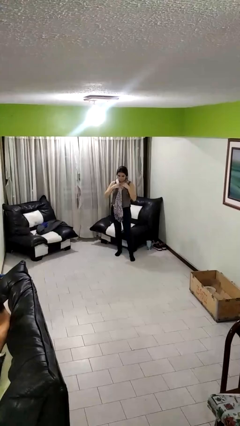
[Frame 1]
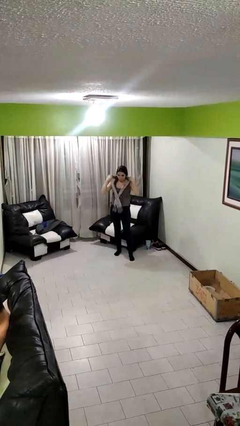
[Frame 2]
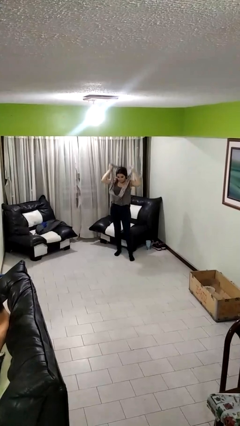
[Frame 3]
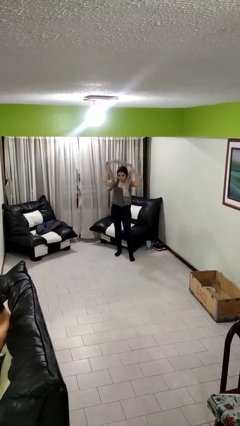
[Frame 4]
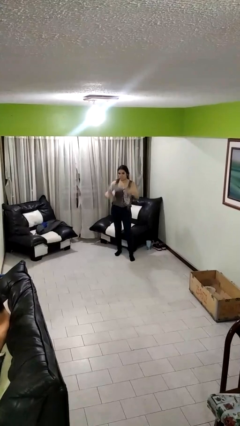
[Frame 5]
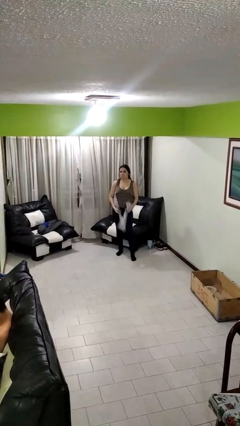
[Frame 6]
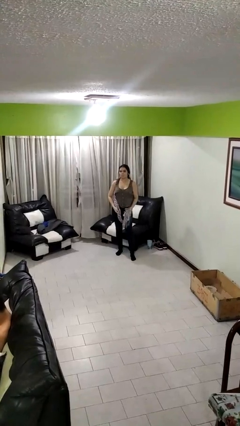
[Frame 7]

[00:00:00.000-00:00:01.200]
person takes off scarf

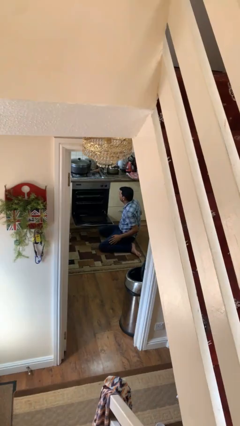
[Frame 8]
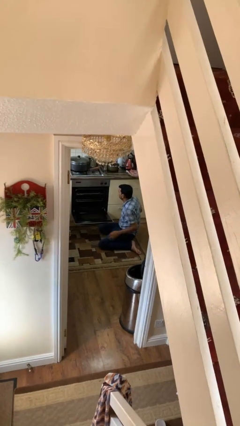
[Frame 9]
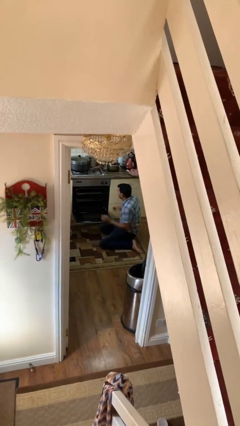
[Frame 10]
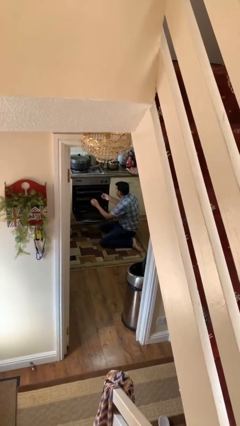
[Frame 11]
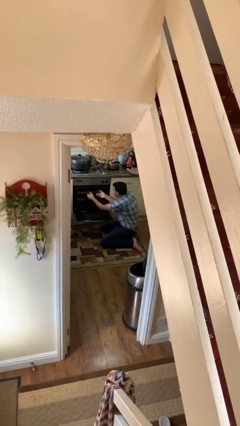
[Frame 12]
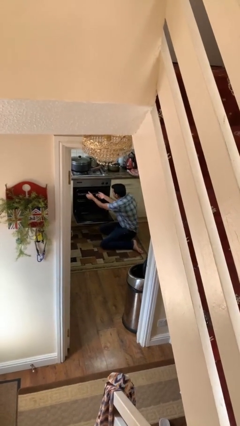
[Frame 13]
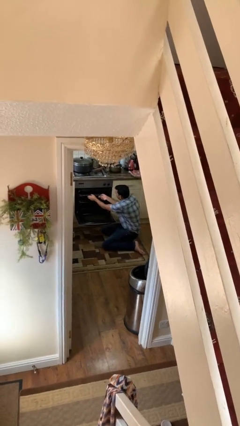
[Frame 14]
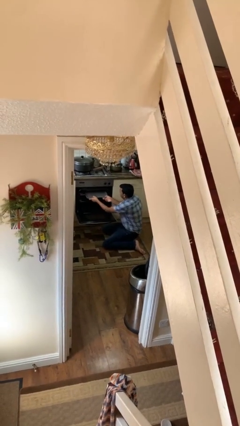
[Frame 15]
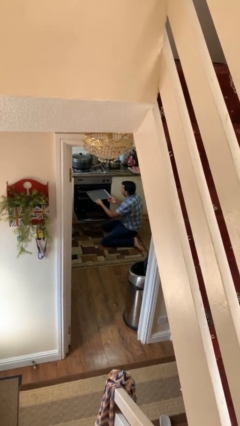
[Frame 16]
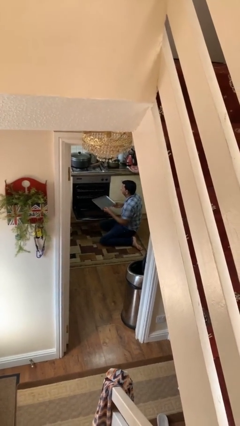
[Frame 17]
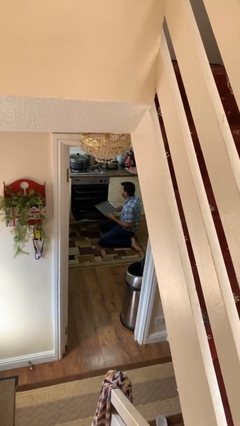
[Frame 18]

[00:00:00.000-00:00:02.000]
person takes object from oven

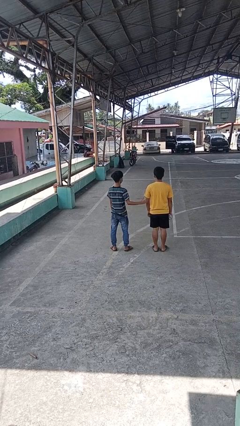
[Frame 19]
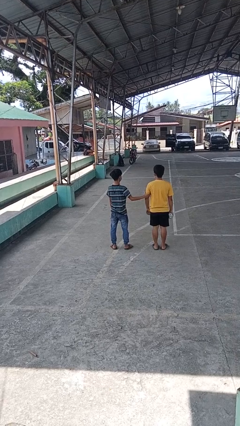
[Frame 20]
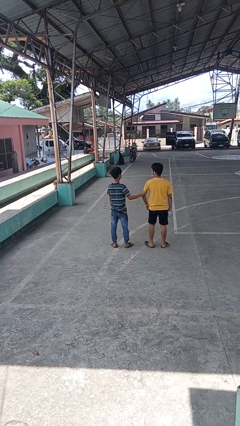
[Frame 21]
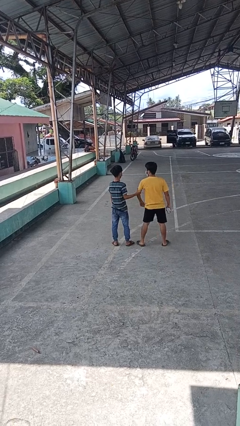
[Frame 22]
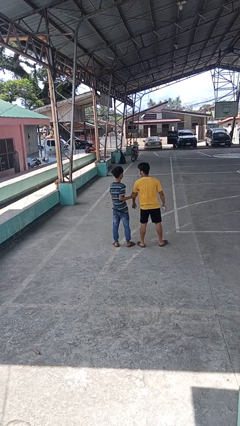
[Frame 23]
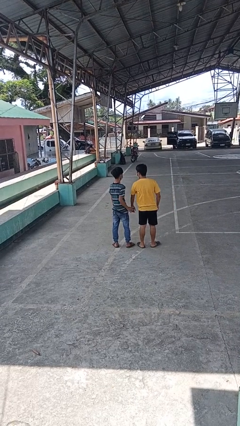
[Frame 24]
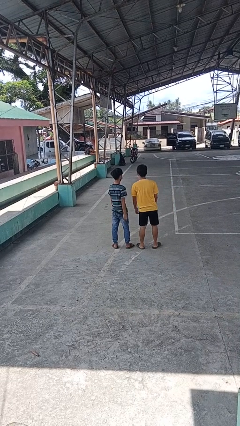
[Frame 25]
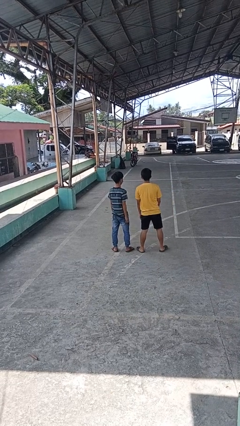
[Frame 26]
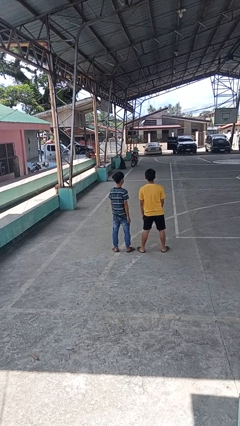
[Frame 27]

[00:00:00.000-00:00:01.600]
person grabs person by bicep

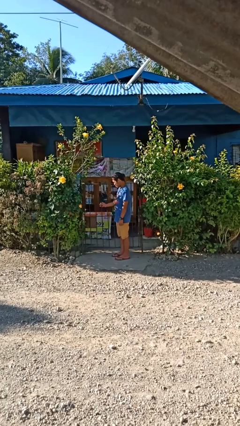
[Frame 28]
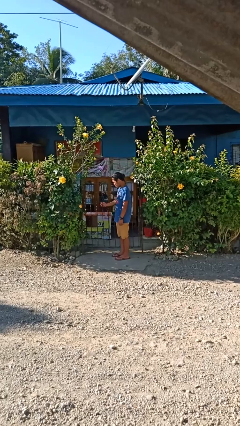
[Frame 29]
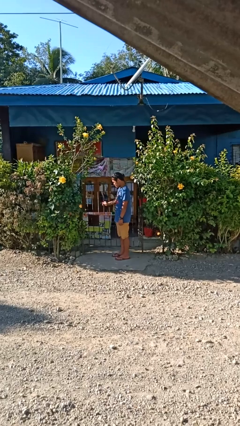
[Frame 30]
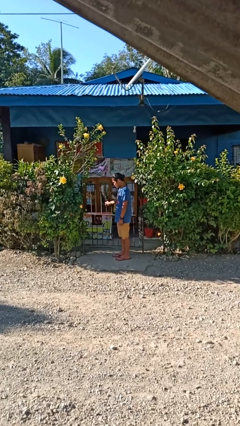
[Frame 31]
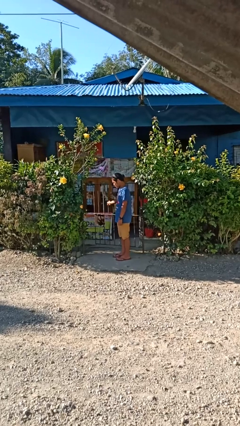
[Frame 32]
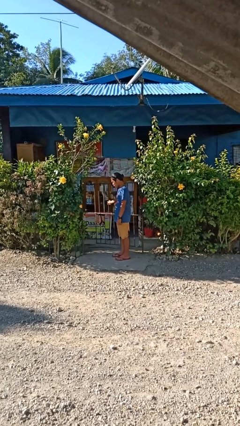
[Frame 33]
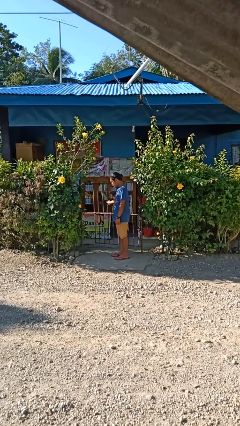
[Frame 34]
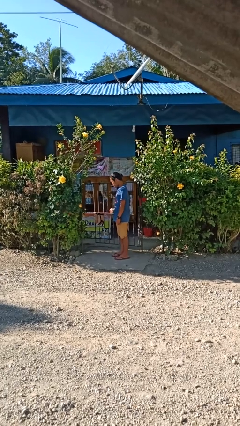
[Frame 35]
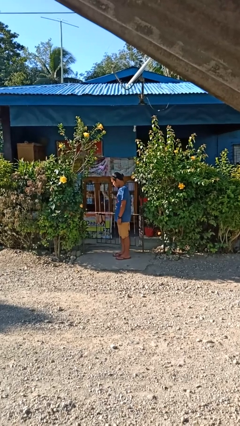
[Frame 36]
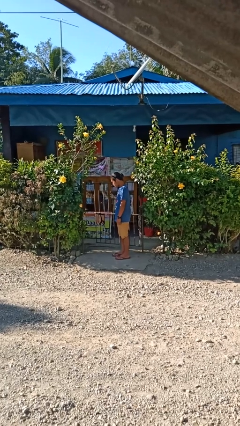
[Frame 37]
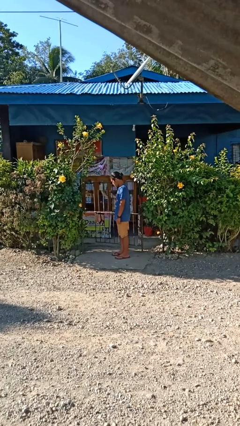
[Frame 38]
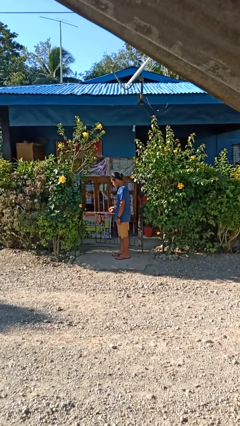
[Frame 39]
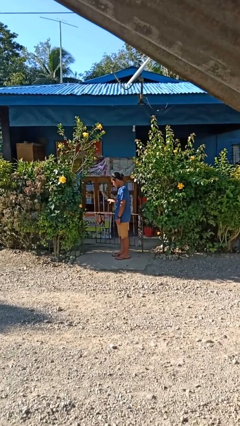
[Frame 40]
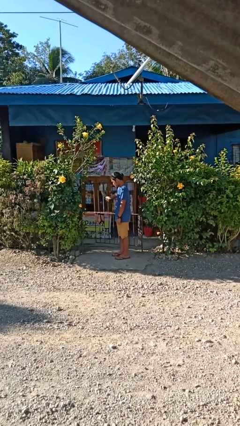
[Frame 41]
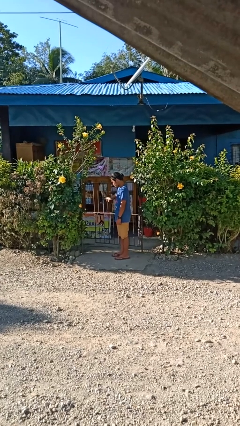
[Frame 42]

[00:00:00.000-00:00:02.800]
person opens gate

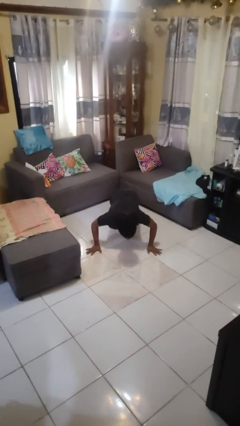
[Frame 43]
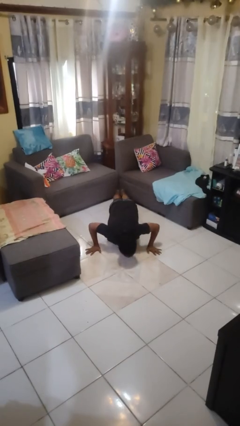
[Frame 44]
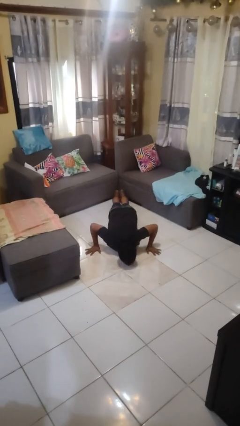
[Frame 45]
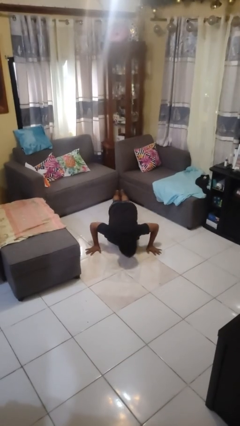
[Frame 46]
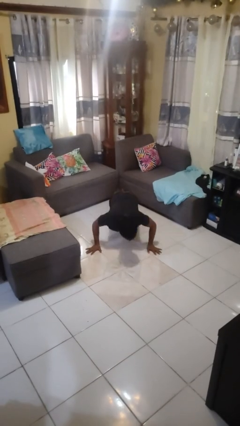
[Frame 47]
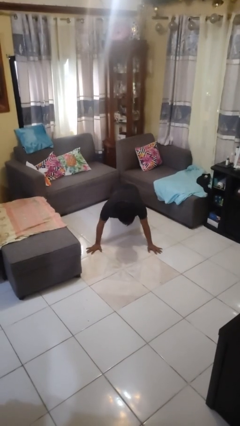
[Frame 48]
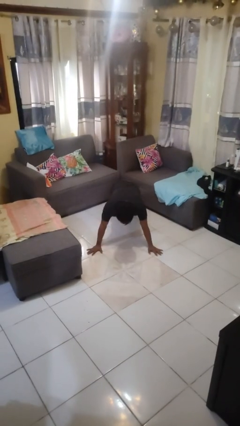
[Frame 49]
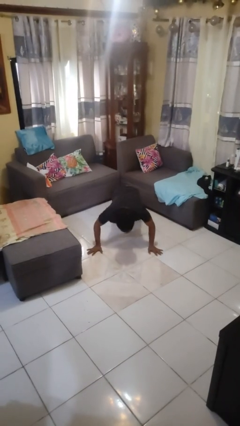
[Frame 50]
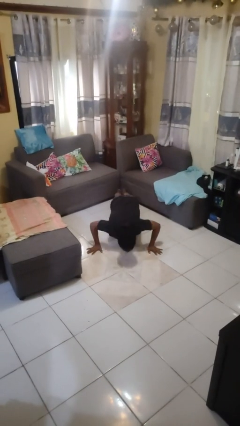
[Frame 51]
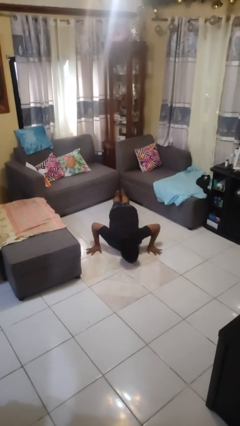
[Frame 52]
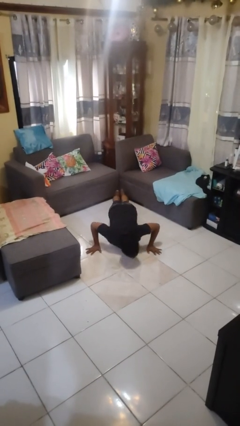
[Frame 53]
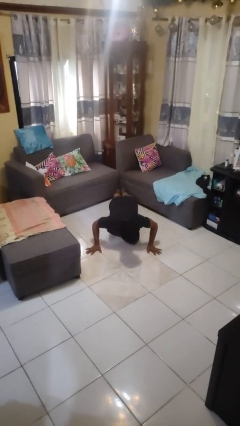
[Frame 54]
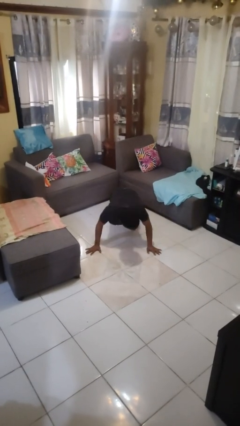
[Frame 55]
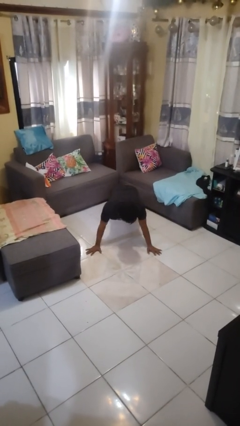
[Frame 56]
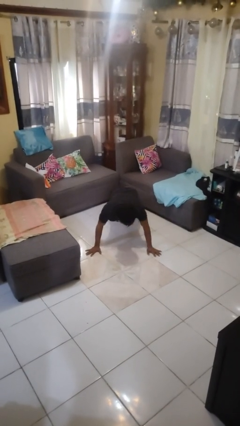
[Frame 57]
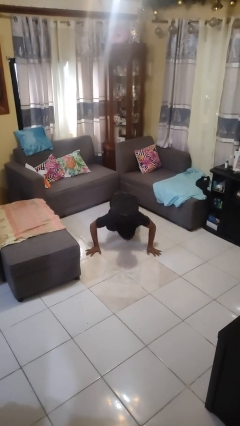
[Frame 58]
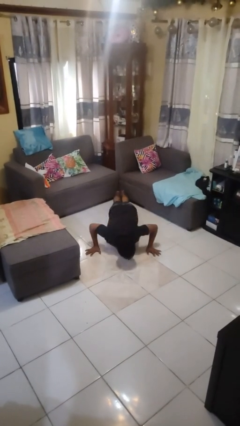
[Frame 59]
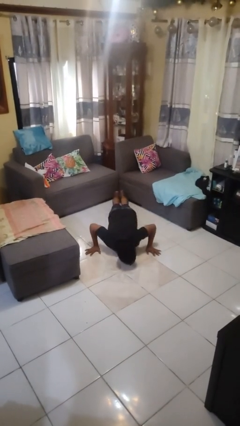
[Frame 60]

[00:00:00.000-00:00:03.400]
person exercises with pushup

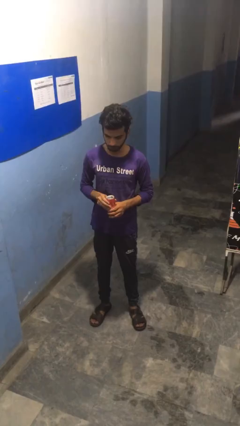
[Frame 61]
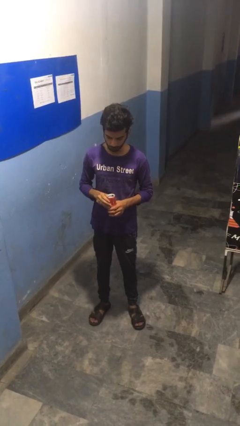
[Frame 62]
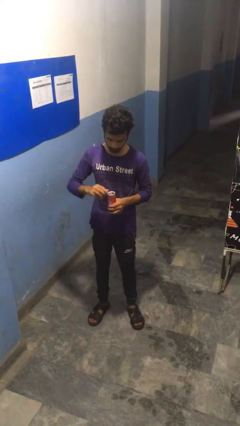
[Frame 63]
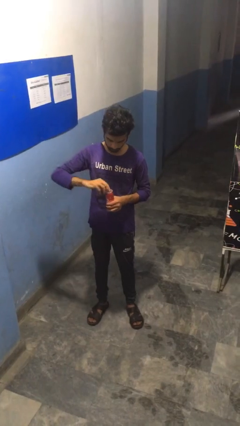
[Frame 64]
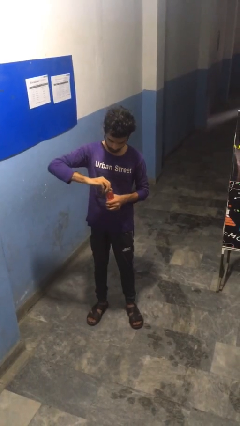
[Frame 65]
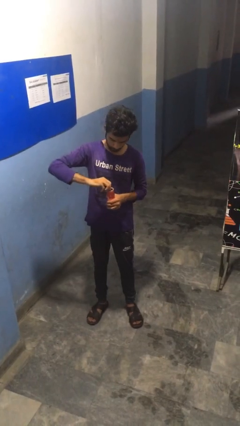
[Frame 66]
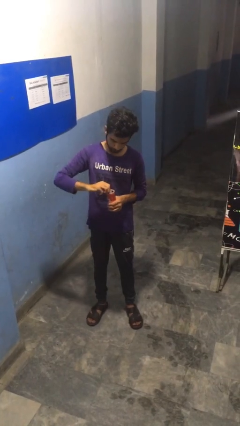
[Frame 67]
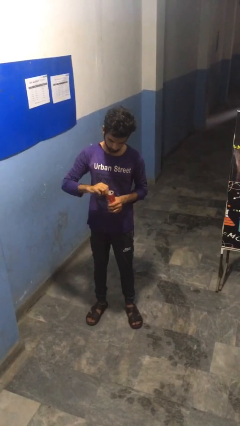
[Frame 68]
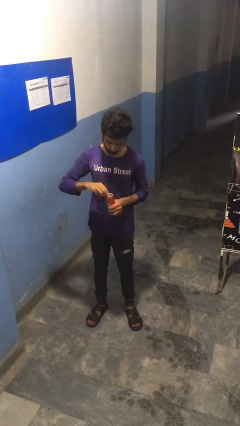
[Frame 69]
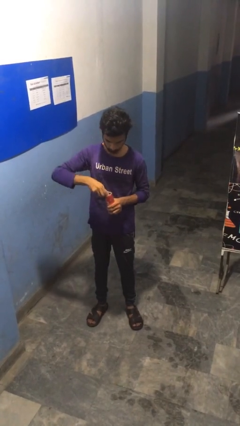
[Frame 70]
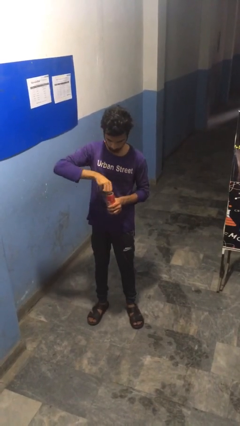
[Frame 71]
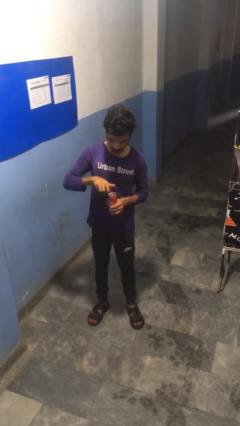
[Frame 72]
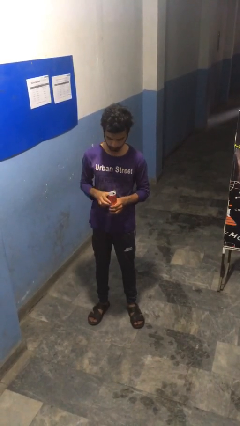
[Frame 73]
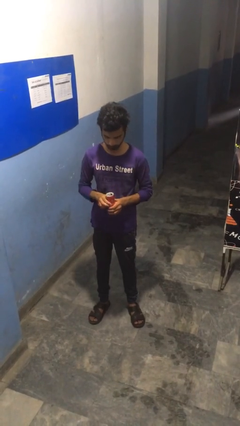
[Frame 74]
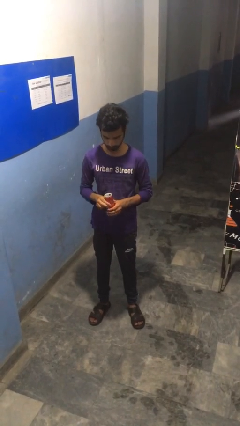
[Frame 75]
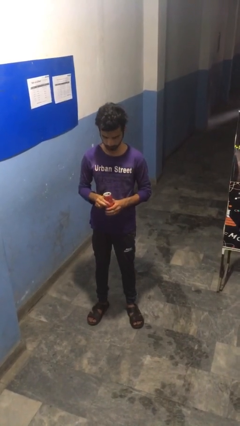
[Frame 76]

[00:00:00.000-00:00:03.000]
person opens beverage can

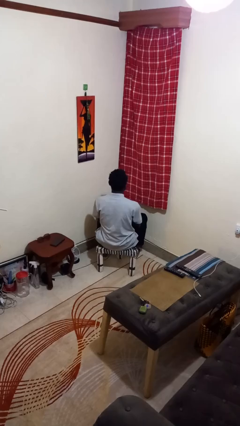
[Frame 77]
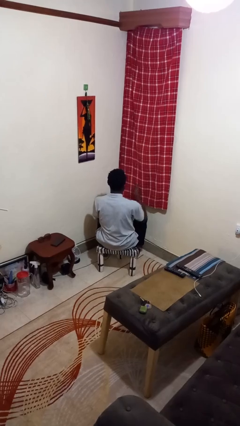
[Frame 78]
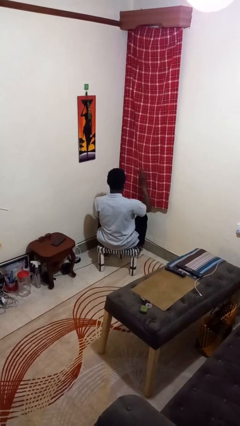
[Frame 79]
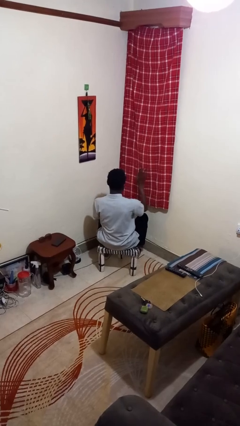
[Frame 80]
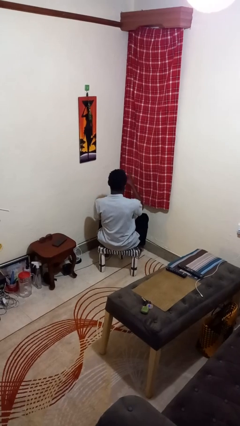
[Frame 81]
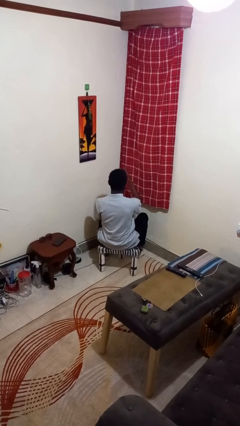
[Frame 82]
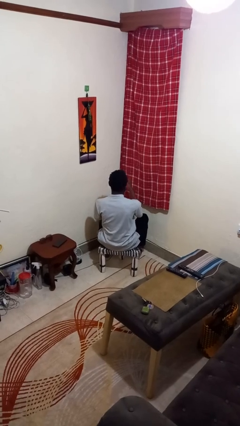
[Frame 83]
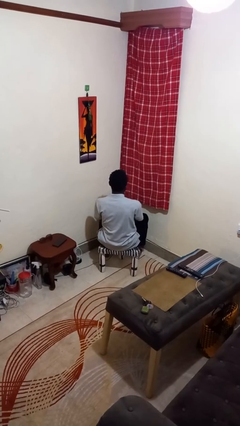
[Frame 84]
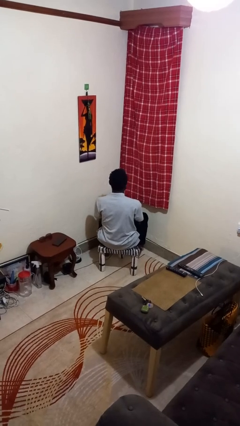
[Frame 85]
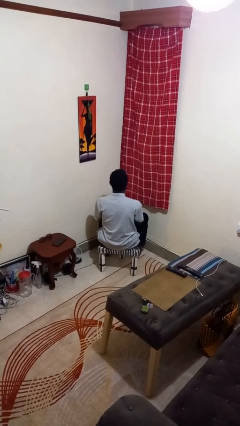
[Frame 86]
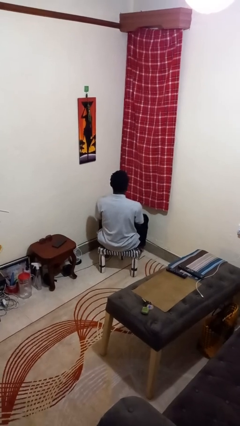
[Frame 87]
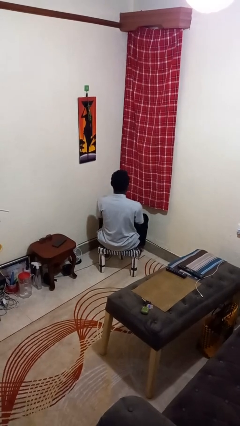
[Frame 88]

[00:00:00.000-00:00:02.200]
person gestures swipe left

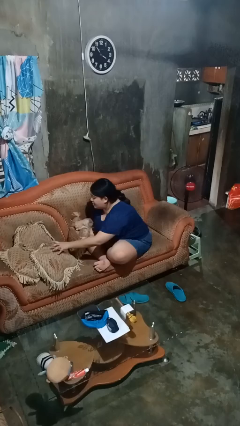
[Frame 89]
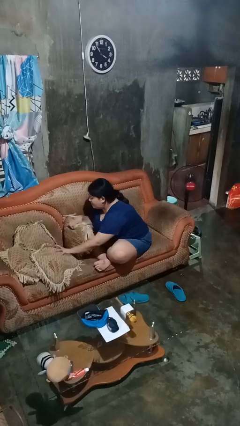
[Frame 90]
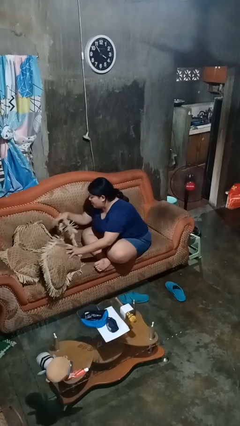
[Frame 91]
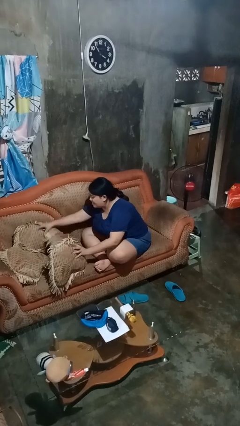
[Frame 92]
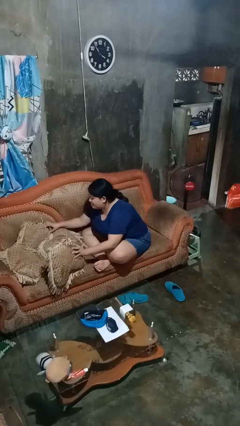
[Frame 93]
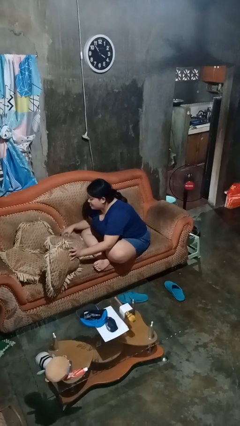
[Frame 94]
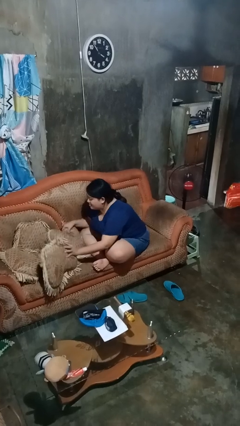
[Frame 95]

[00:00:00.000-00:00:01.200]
person searches in couch
